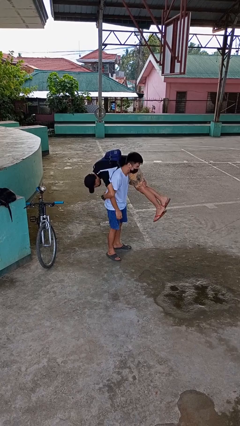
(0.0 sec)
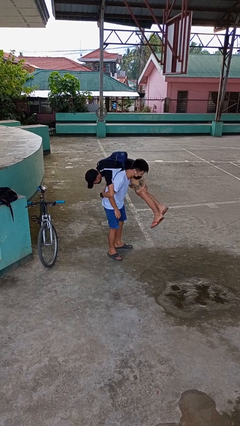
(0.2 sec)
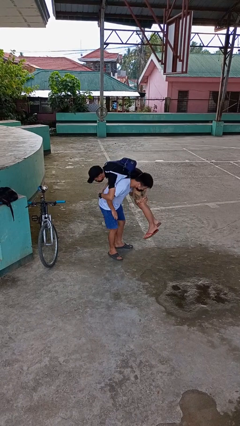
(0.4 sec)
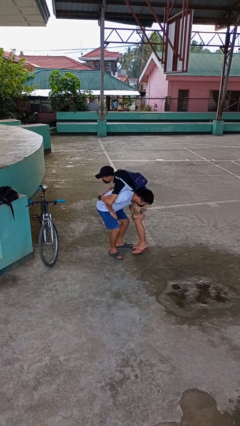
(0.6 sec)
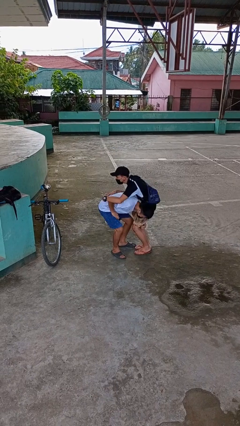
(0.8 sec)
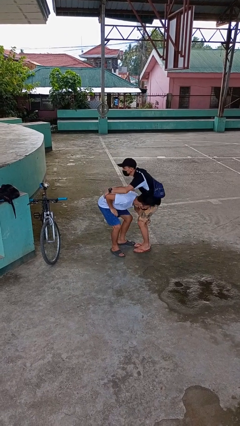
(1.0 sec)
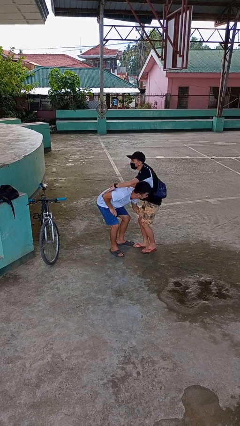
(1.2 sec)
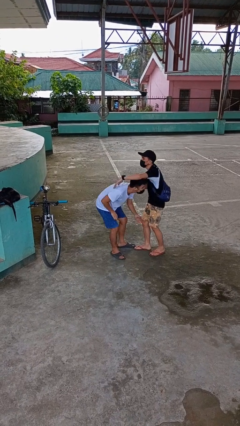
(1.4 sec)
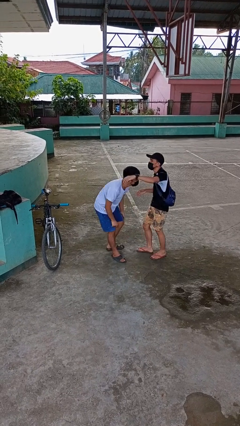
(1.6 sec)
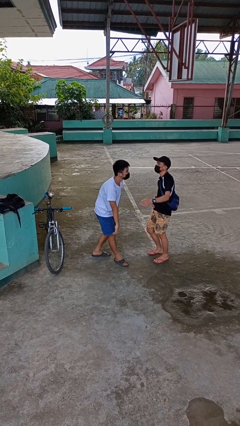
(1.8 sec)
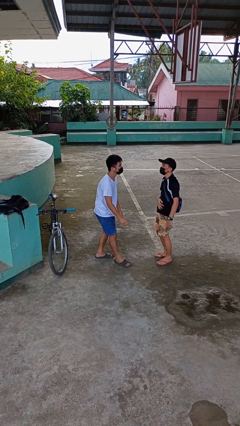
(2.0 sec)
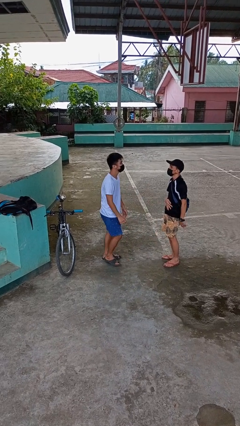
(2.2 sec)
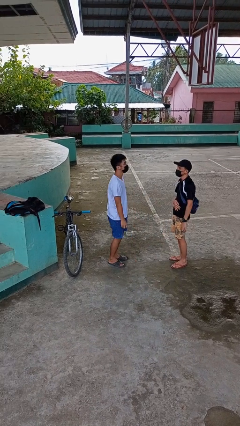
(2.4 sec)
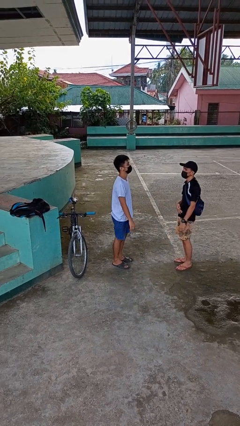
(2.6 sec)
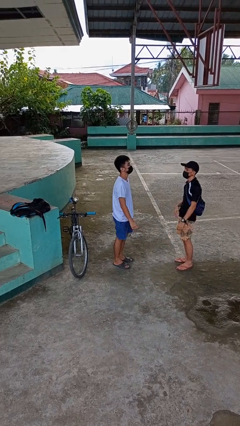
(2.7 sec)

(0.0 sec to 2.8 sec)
person puts down person

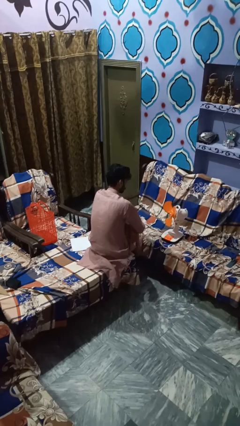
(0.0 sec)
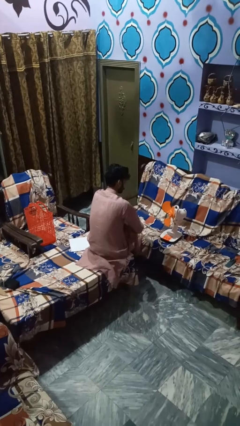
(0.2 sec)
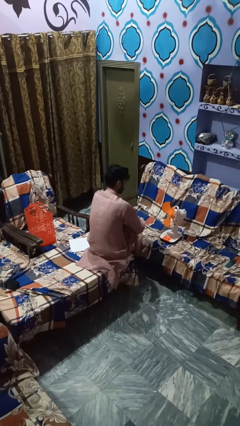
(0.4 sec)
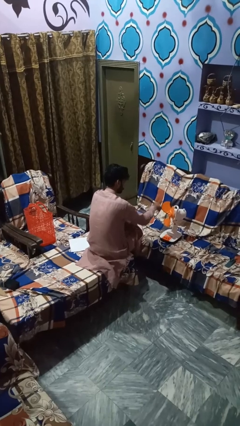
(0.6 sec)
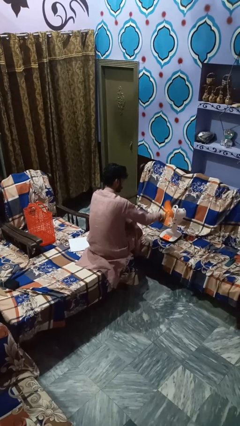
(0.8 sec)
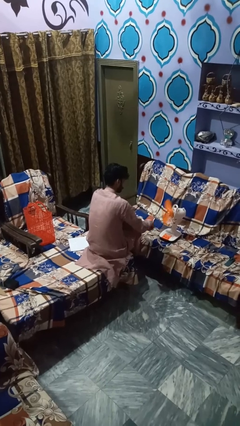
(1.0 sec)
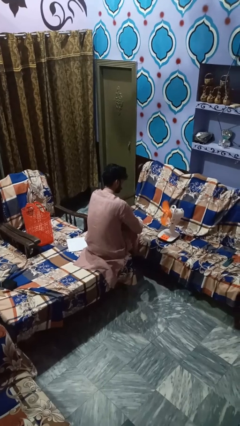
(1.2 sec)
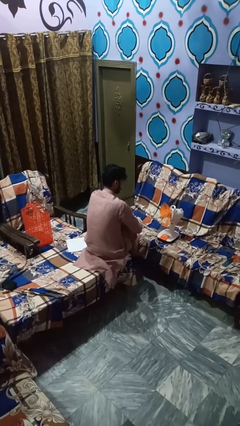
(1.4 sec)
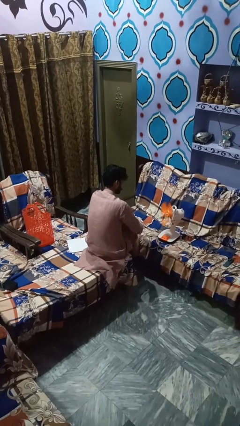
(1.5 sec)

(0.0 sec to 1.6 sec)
person turns on fan

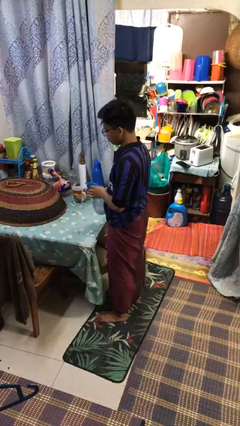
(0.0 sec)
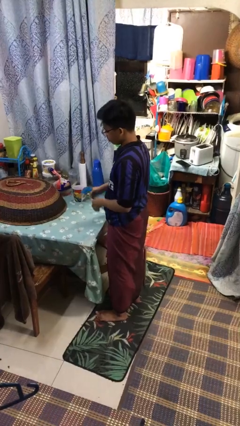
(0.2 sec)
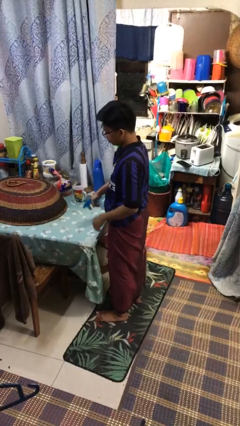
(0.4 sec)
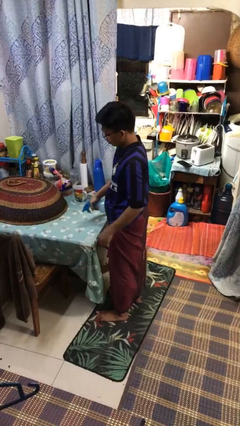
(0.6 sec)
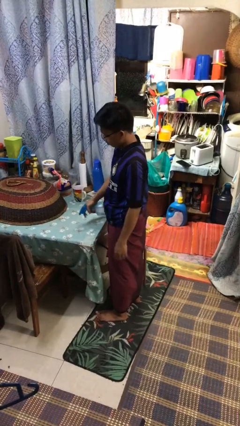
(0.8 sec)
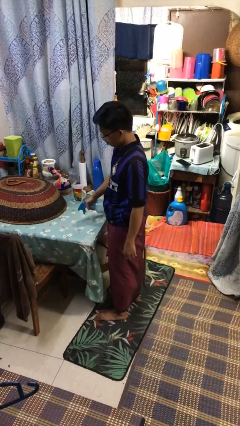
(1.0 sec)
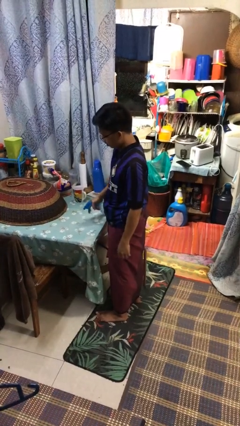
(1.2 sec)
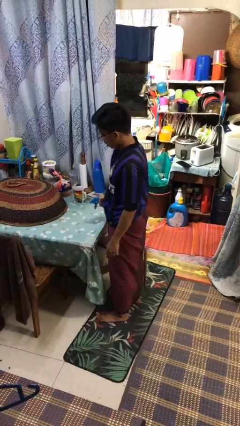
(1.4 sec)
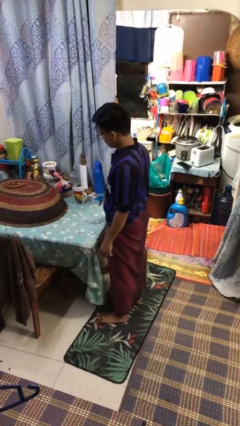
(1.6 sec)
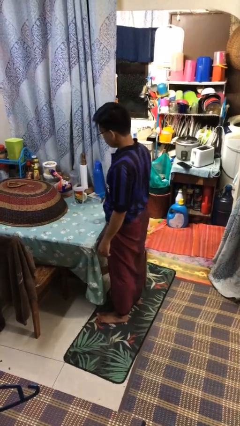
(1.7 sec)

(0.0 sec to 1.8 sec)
person sprays from bottle

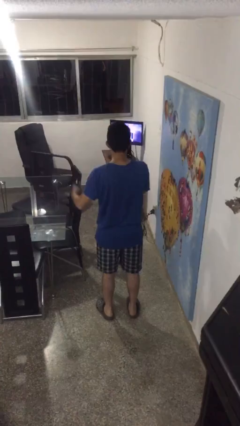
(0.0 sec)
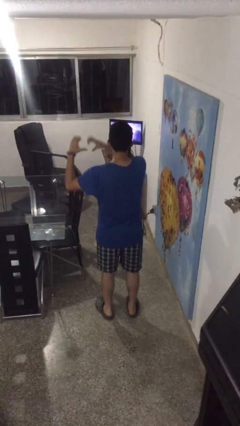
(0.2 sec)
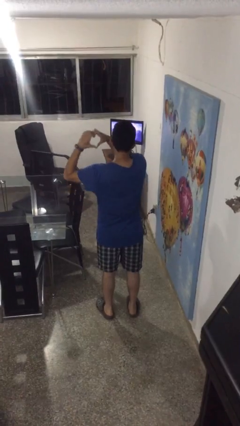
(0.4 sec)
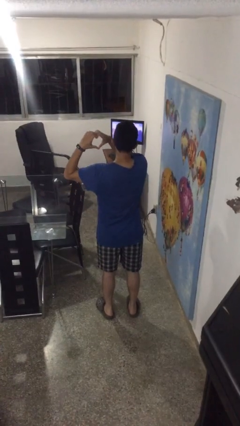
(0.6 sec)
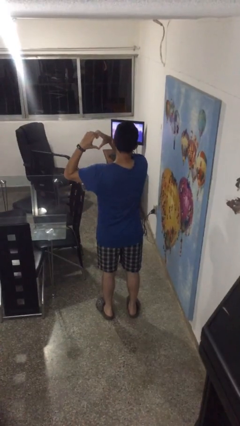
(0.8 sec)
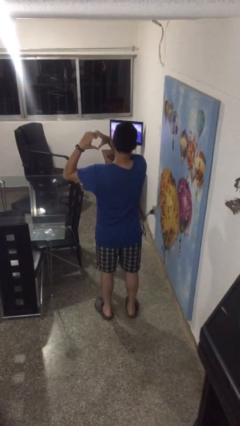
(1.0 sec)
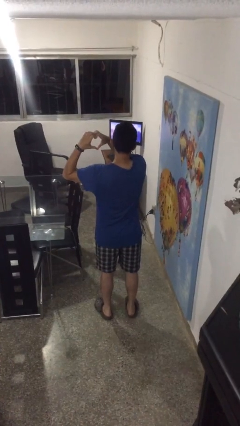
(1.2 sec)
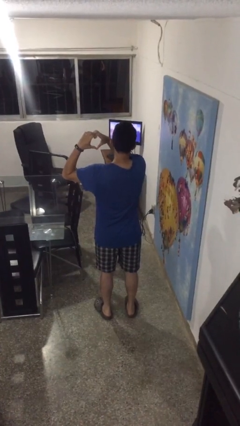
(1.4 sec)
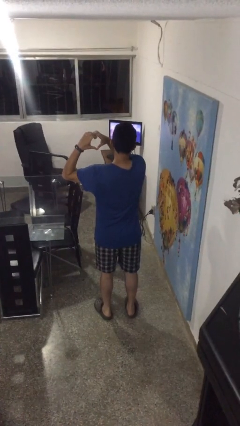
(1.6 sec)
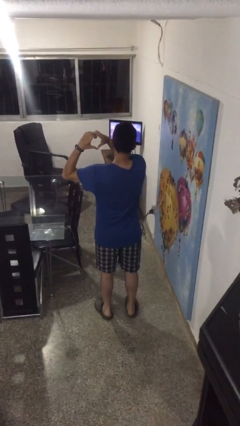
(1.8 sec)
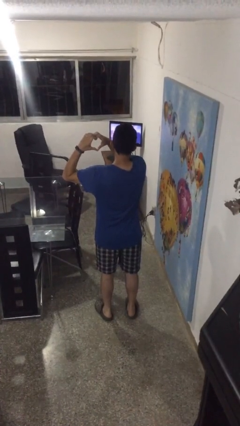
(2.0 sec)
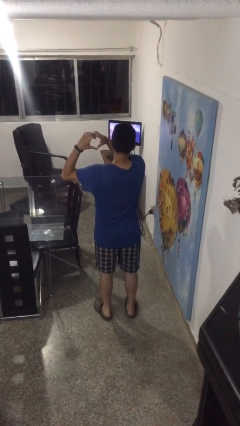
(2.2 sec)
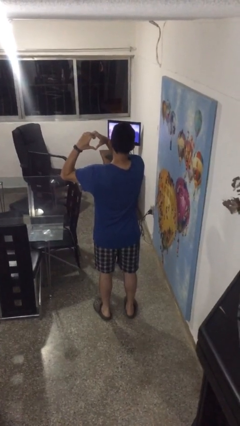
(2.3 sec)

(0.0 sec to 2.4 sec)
person gestures heart

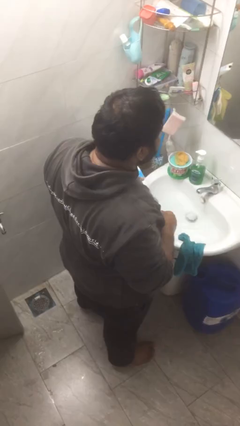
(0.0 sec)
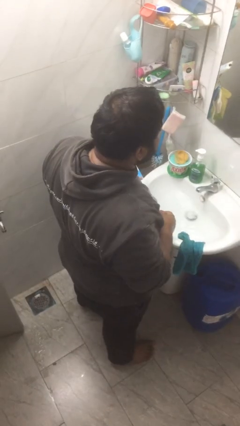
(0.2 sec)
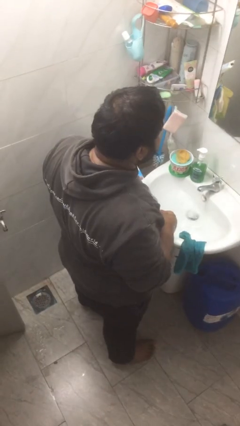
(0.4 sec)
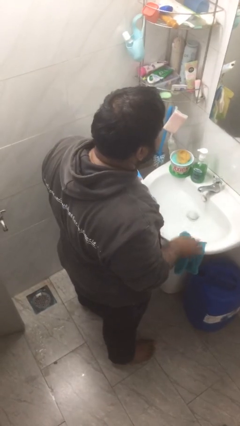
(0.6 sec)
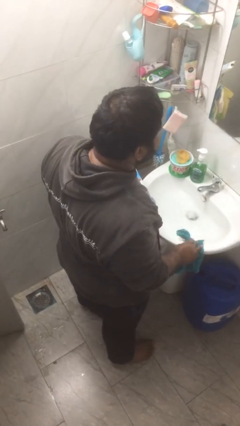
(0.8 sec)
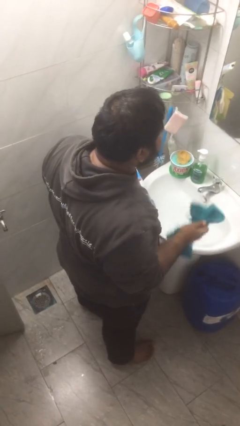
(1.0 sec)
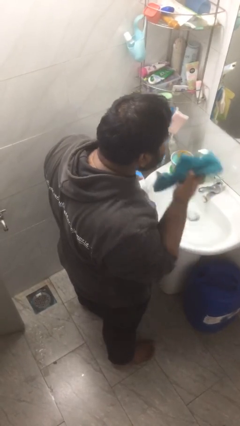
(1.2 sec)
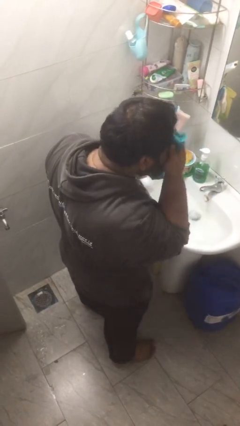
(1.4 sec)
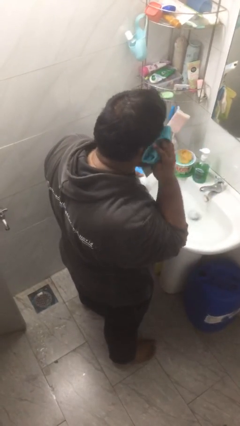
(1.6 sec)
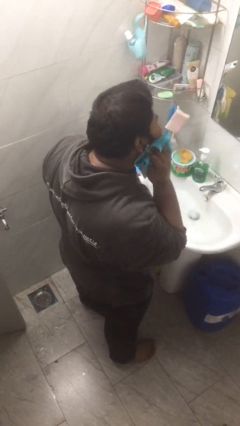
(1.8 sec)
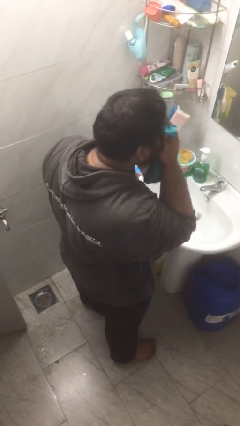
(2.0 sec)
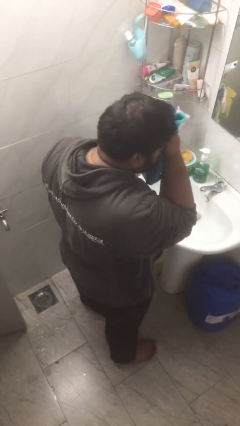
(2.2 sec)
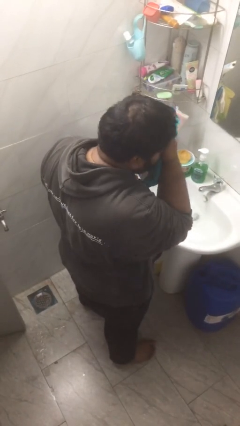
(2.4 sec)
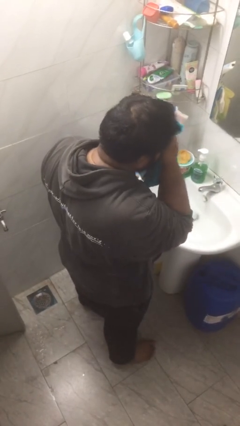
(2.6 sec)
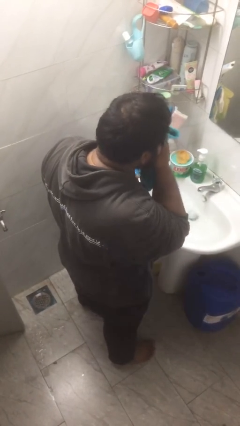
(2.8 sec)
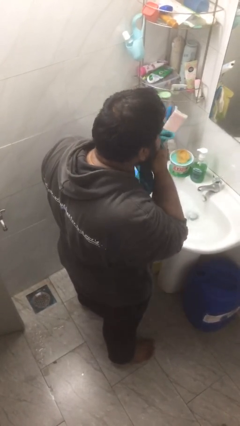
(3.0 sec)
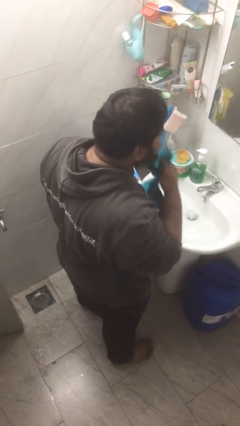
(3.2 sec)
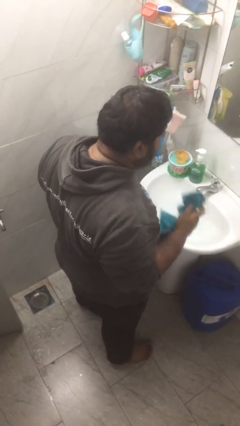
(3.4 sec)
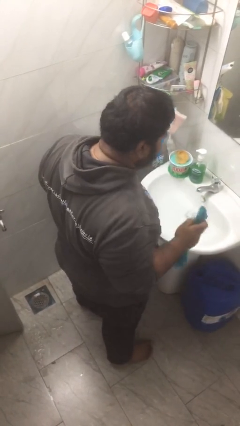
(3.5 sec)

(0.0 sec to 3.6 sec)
person dries face with towel

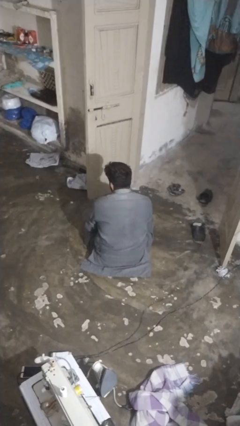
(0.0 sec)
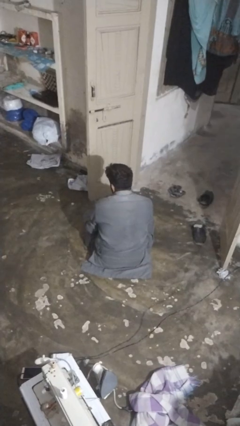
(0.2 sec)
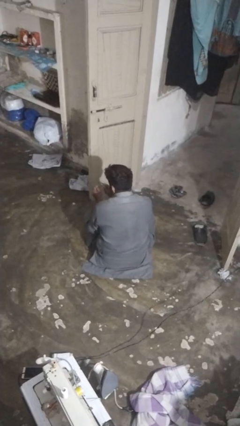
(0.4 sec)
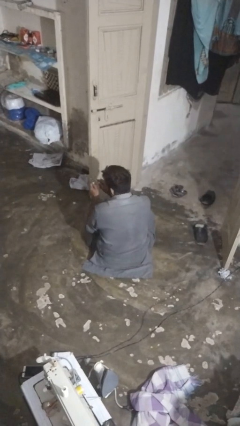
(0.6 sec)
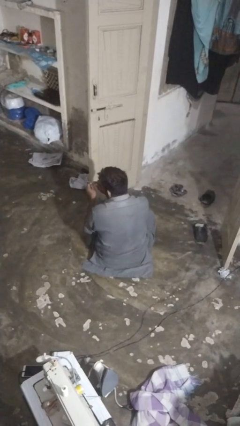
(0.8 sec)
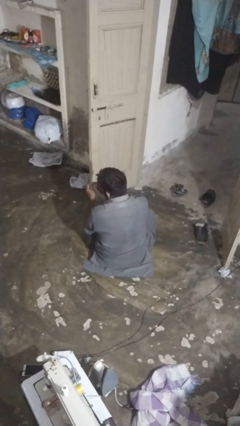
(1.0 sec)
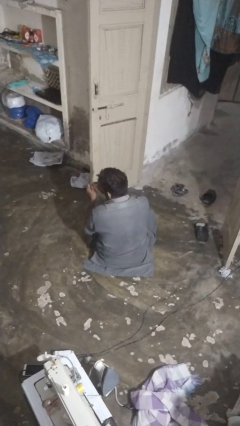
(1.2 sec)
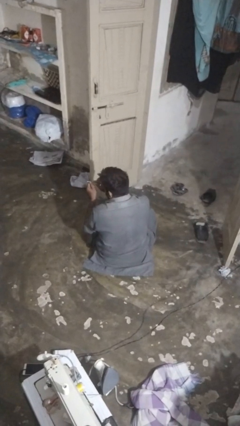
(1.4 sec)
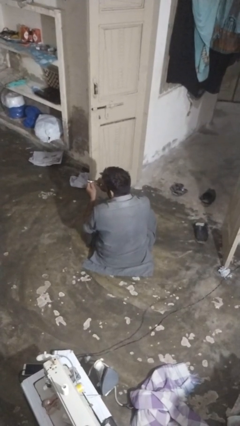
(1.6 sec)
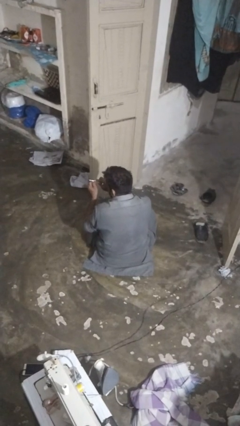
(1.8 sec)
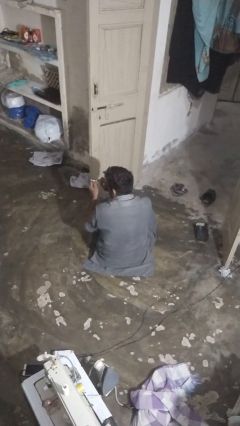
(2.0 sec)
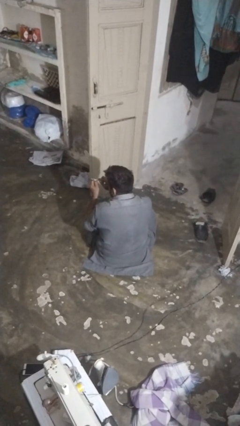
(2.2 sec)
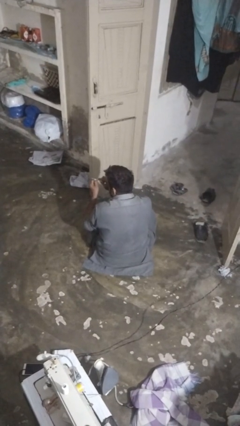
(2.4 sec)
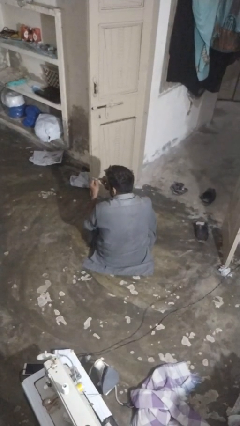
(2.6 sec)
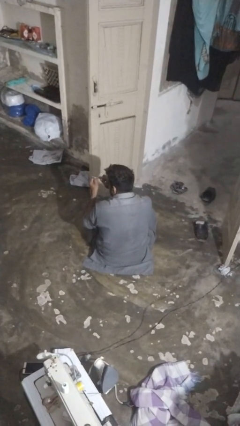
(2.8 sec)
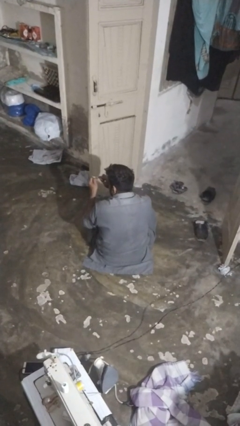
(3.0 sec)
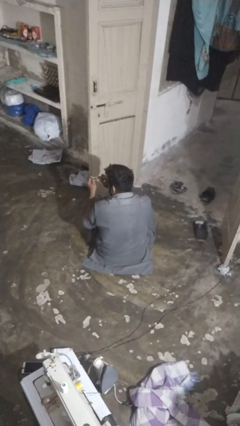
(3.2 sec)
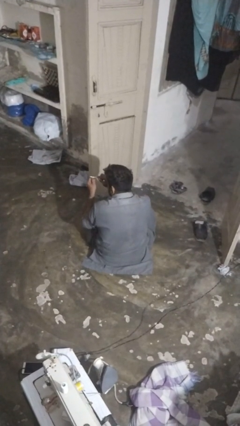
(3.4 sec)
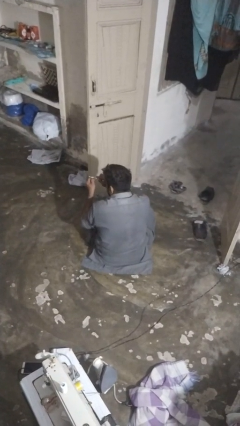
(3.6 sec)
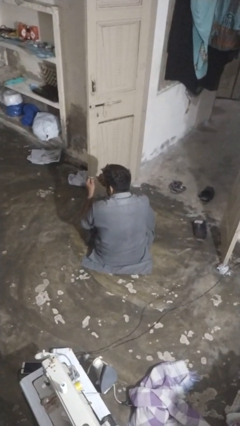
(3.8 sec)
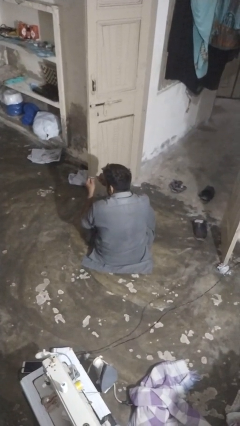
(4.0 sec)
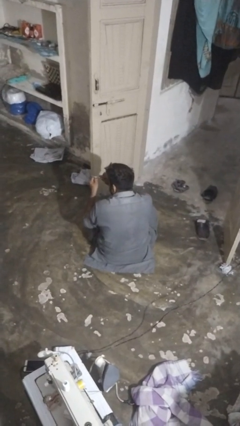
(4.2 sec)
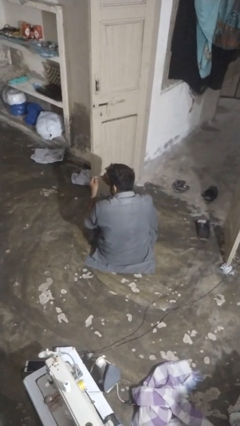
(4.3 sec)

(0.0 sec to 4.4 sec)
person files fingernails

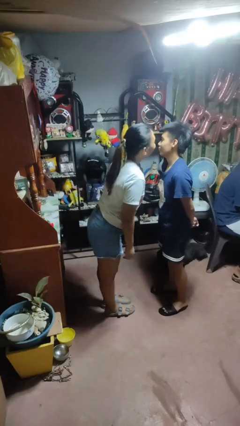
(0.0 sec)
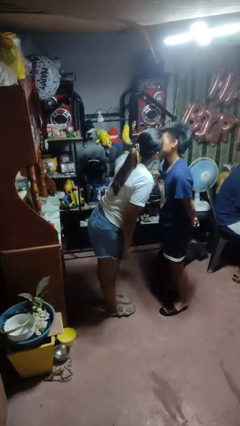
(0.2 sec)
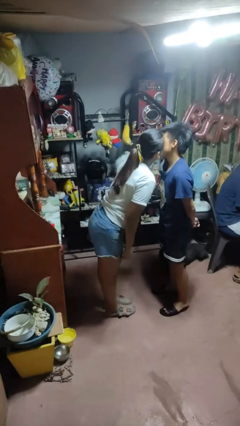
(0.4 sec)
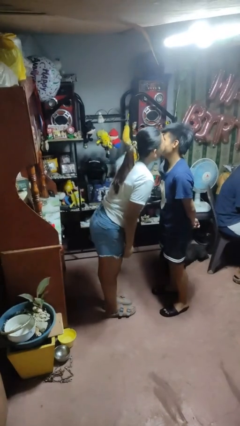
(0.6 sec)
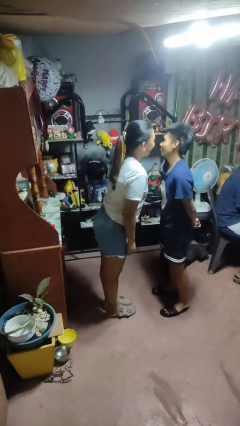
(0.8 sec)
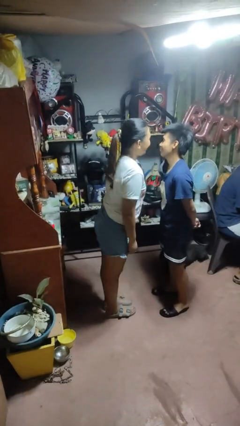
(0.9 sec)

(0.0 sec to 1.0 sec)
person kisses cheek of person
